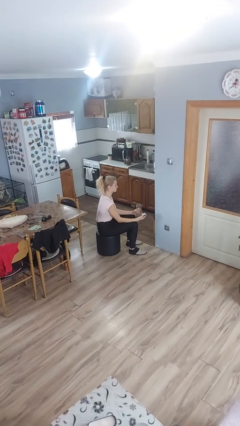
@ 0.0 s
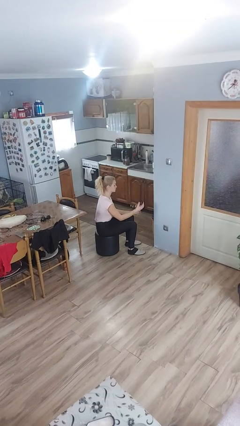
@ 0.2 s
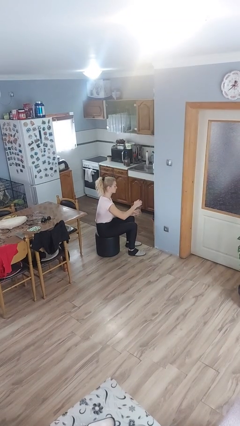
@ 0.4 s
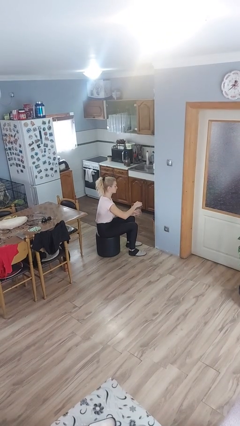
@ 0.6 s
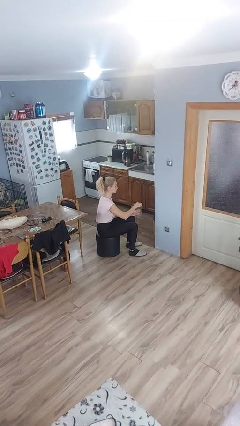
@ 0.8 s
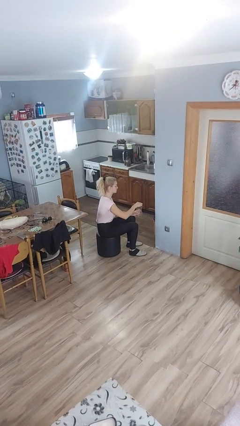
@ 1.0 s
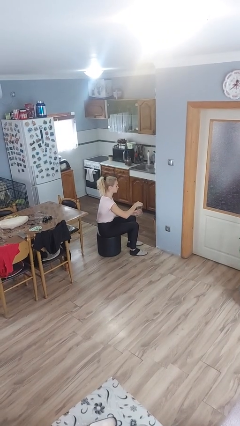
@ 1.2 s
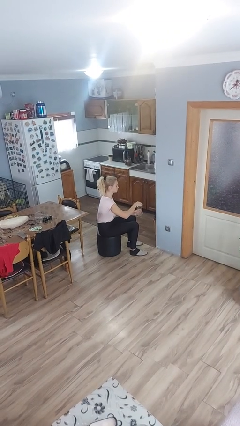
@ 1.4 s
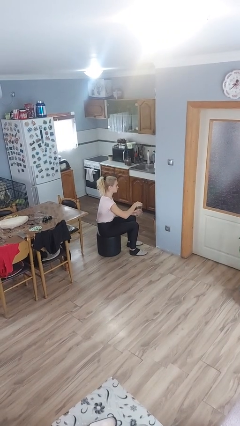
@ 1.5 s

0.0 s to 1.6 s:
person closes jar

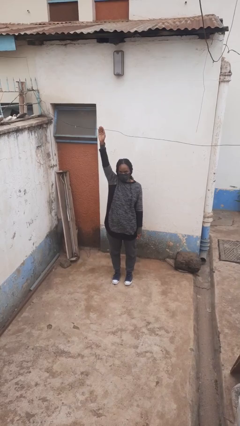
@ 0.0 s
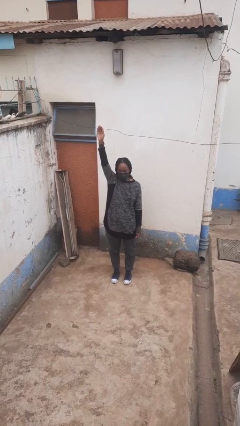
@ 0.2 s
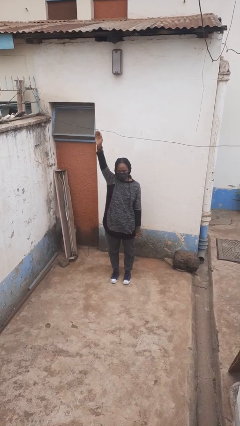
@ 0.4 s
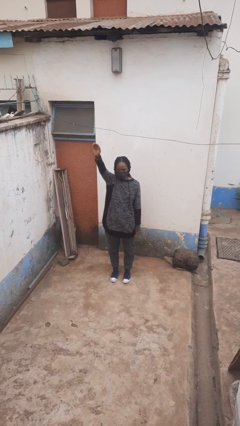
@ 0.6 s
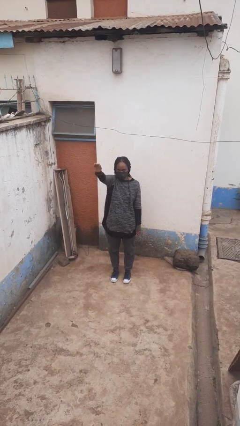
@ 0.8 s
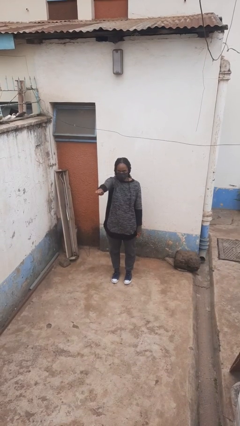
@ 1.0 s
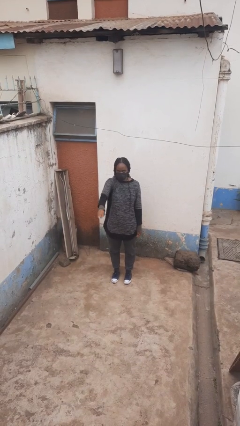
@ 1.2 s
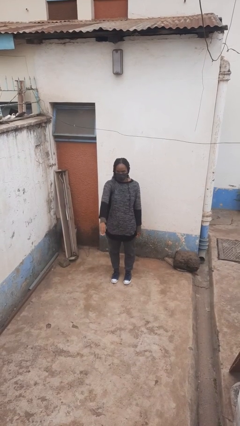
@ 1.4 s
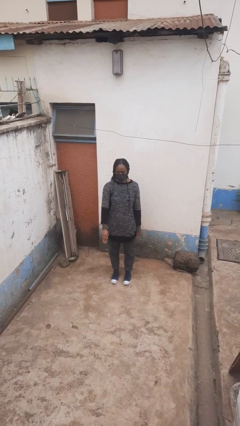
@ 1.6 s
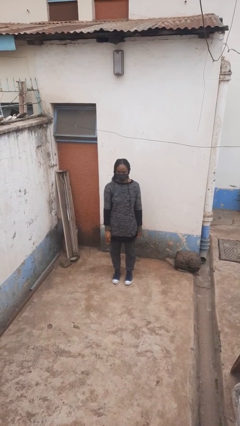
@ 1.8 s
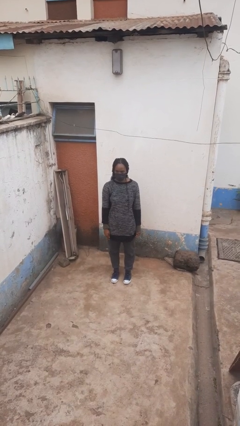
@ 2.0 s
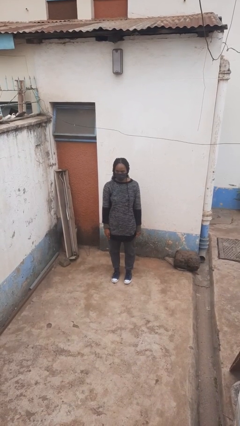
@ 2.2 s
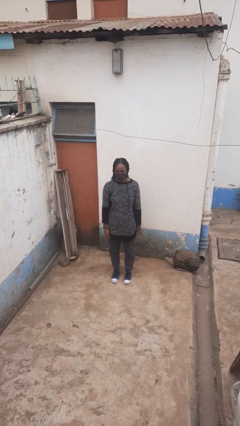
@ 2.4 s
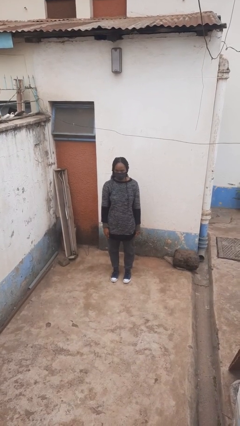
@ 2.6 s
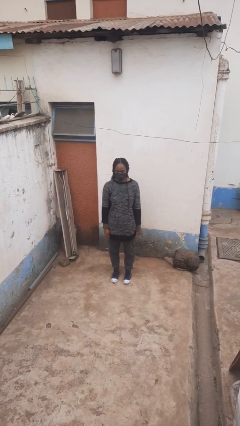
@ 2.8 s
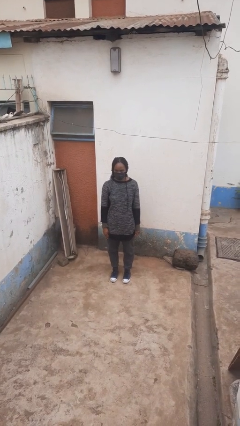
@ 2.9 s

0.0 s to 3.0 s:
person gestures lower hand

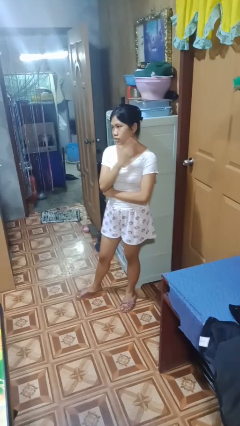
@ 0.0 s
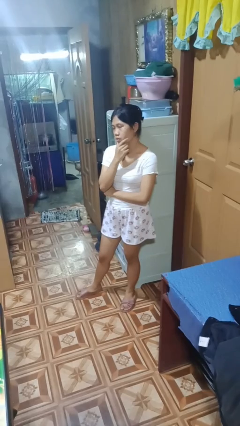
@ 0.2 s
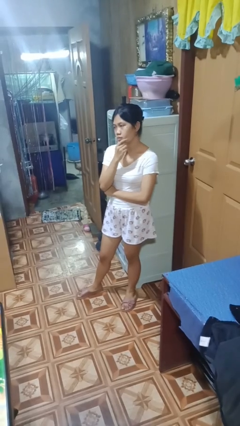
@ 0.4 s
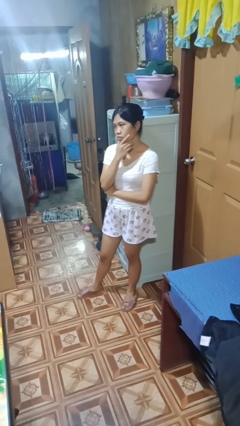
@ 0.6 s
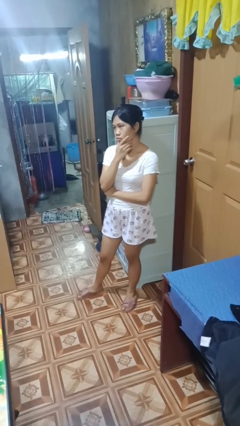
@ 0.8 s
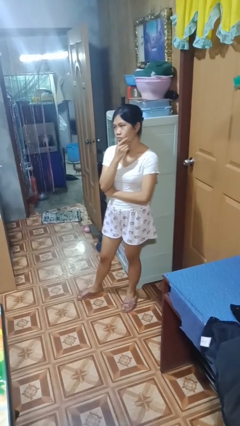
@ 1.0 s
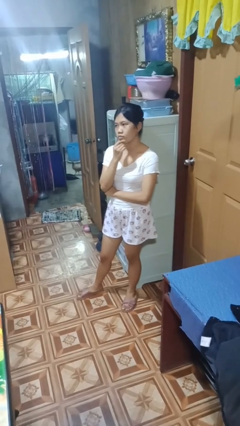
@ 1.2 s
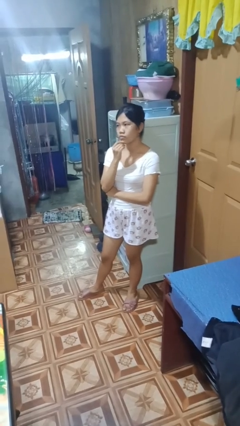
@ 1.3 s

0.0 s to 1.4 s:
person strokes chin

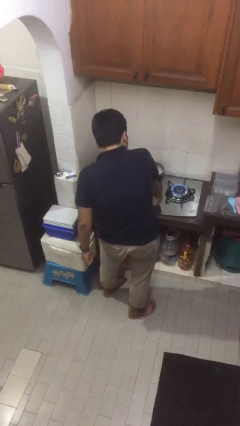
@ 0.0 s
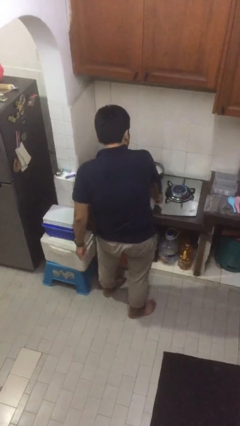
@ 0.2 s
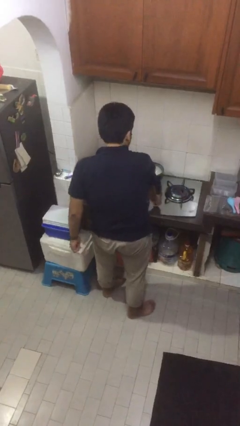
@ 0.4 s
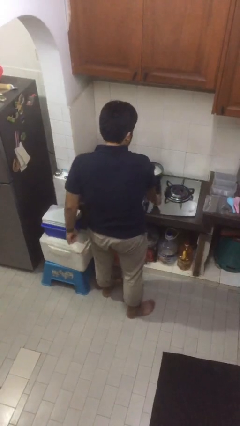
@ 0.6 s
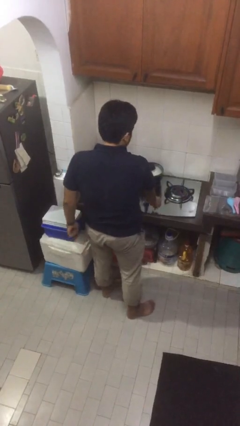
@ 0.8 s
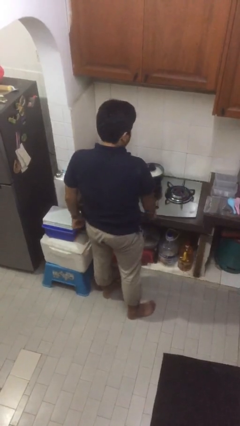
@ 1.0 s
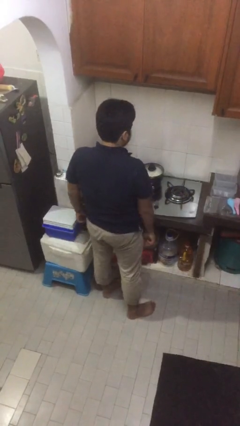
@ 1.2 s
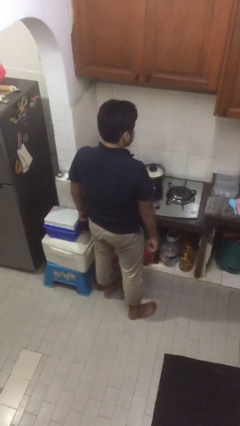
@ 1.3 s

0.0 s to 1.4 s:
person turns off stovetop

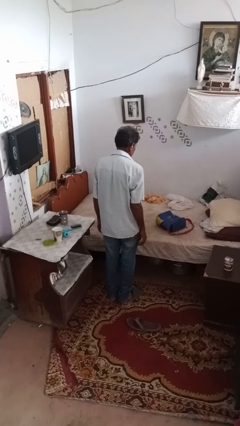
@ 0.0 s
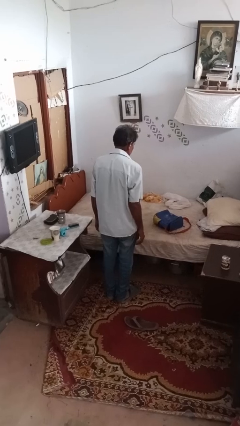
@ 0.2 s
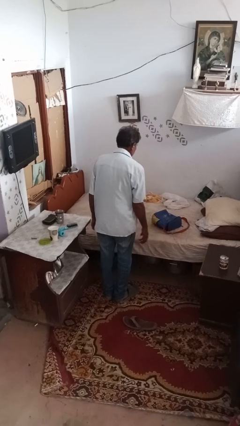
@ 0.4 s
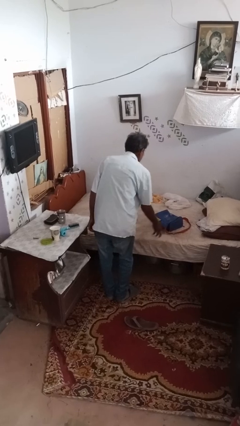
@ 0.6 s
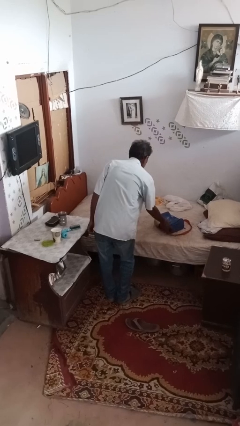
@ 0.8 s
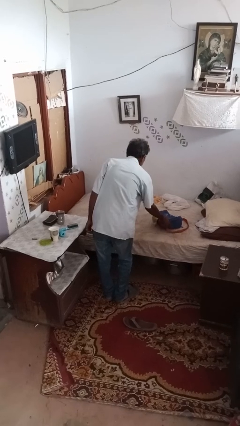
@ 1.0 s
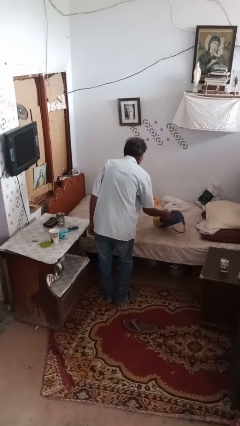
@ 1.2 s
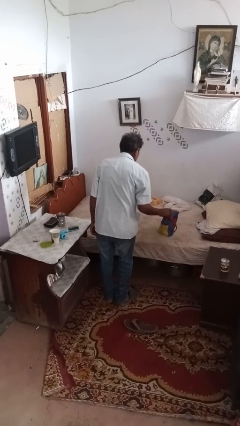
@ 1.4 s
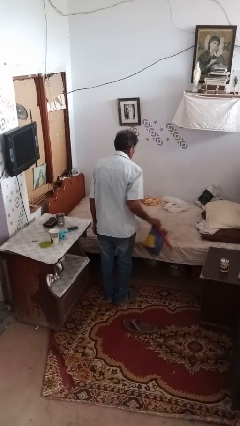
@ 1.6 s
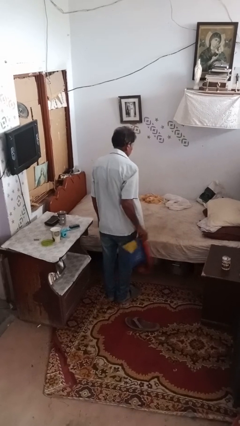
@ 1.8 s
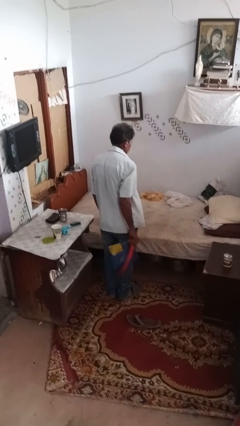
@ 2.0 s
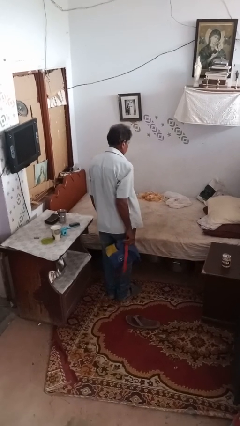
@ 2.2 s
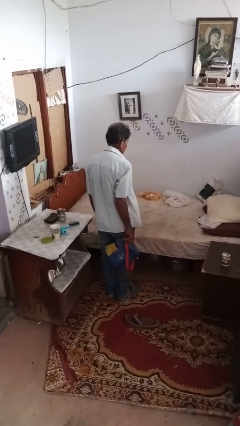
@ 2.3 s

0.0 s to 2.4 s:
person picks up object from bed

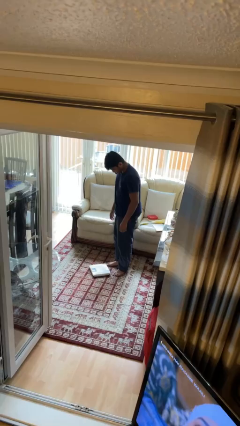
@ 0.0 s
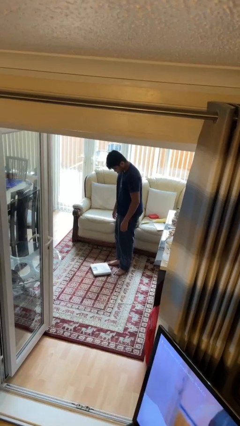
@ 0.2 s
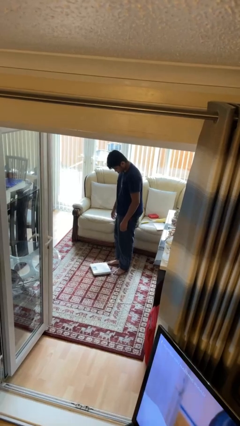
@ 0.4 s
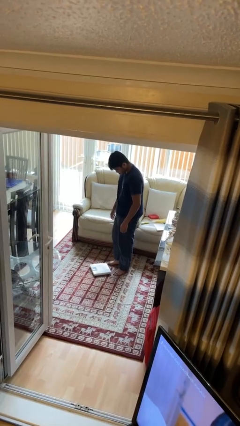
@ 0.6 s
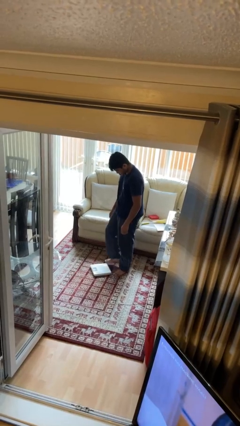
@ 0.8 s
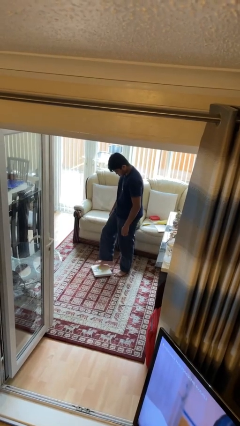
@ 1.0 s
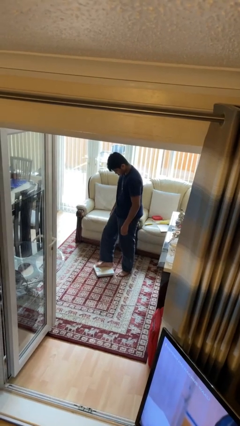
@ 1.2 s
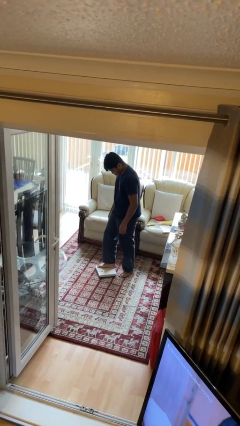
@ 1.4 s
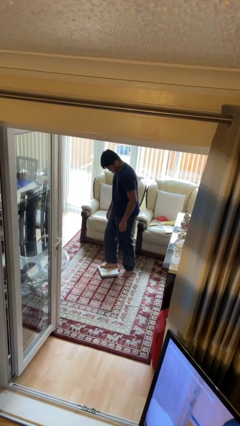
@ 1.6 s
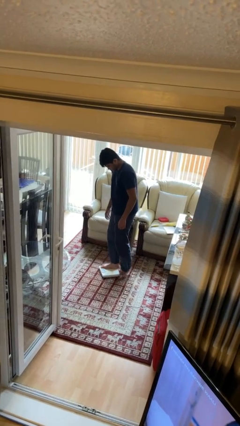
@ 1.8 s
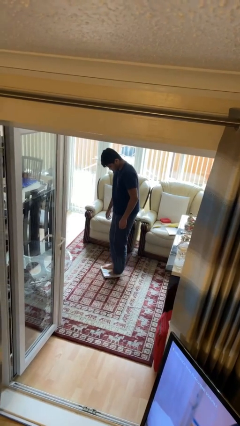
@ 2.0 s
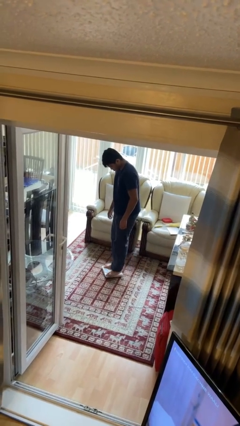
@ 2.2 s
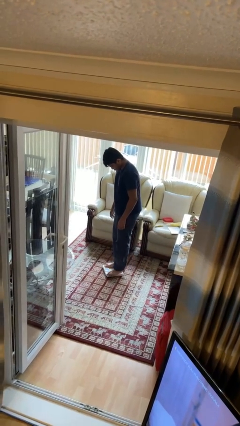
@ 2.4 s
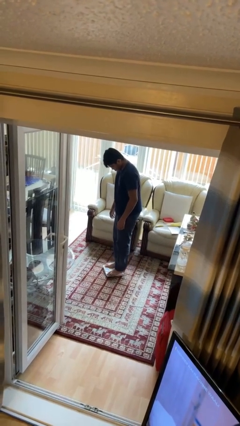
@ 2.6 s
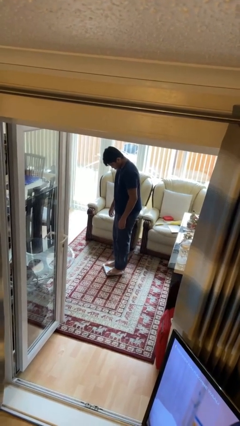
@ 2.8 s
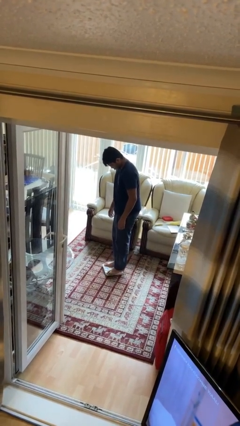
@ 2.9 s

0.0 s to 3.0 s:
person uses bodyweight scale

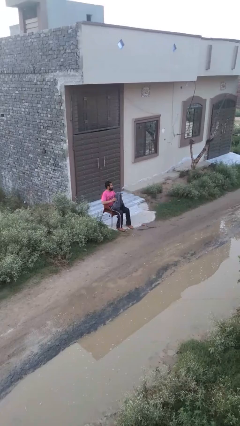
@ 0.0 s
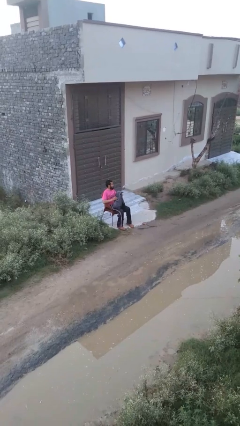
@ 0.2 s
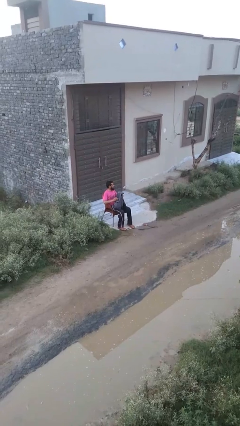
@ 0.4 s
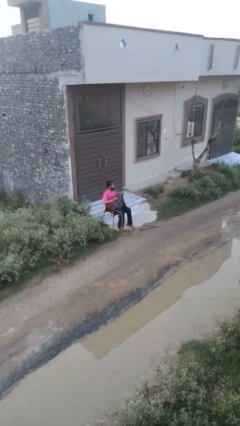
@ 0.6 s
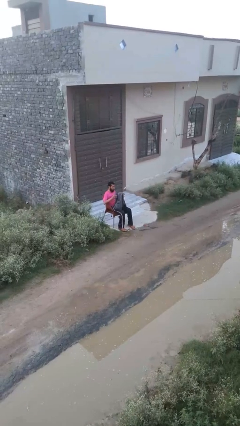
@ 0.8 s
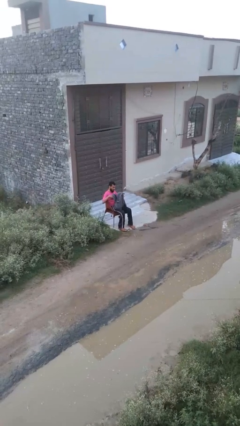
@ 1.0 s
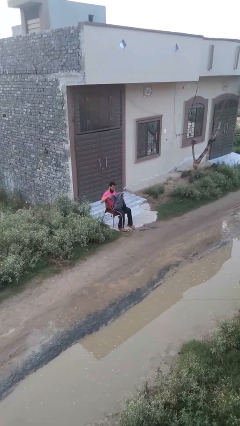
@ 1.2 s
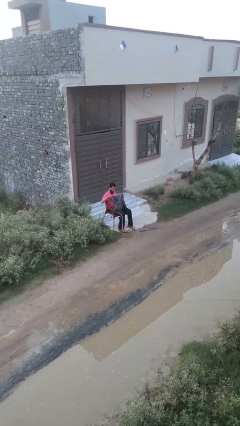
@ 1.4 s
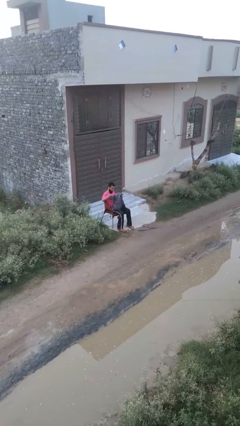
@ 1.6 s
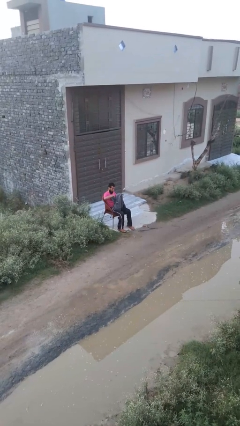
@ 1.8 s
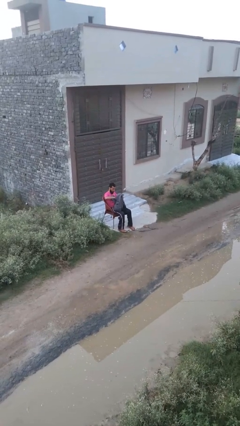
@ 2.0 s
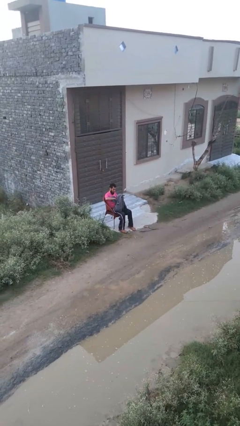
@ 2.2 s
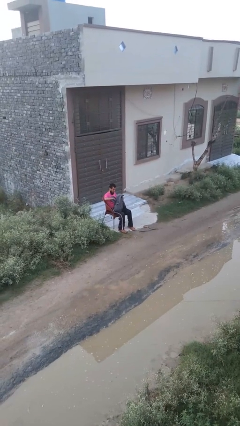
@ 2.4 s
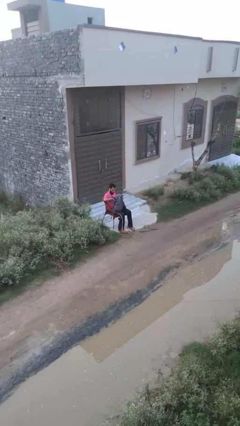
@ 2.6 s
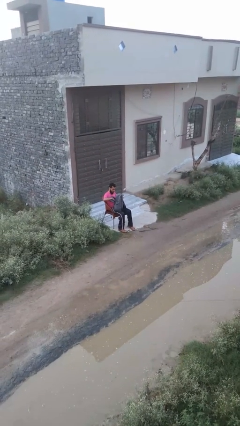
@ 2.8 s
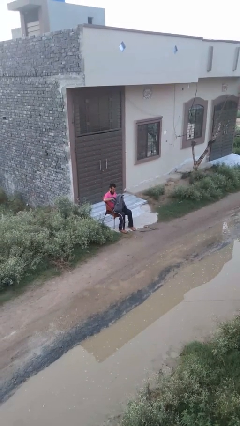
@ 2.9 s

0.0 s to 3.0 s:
person searches in backpack

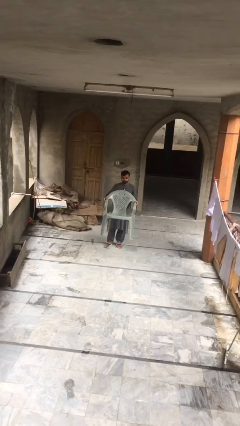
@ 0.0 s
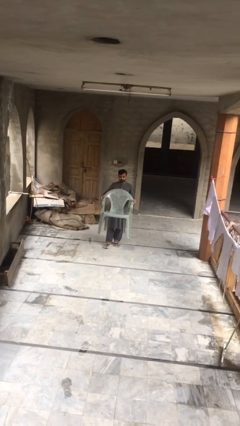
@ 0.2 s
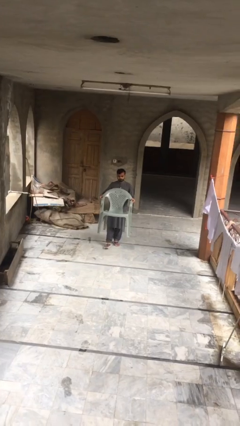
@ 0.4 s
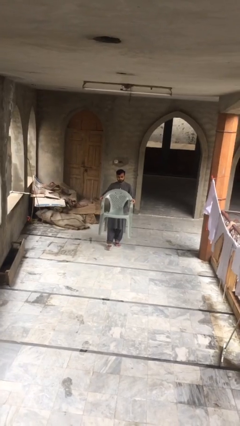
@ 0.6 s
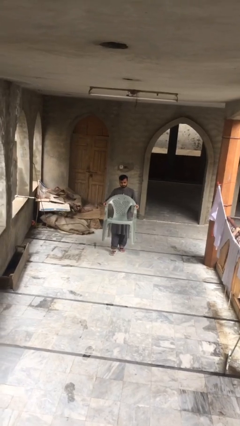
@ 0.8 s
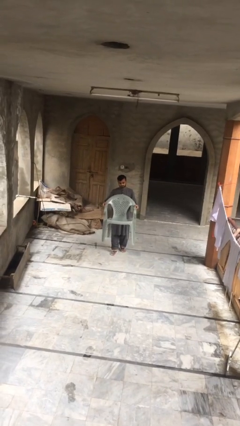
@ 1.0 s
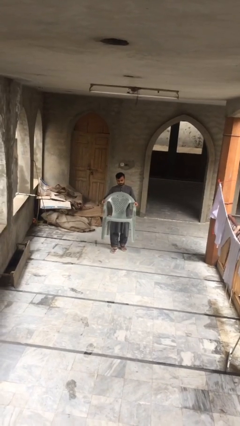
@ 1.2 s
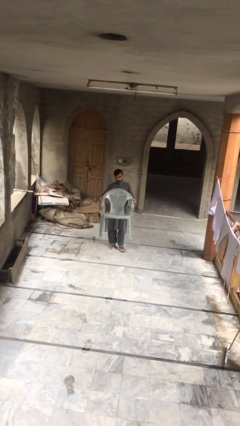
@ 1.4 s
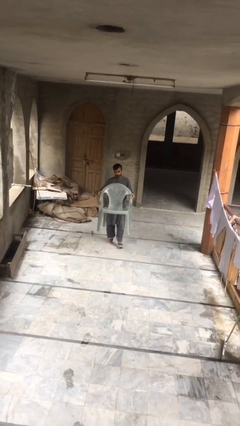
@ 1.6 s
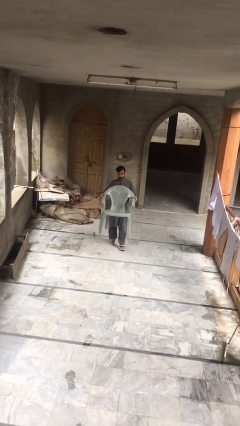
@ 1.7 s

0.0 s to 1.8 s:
person carries heavy object
